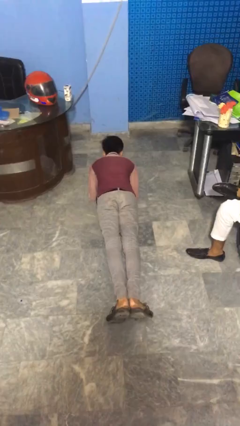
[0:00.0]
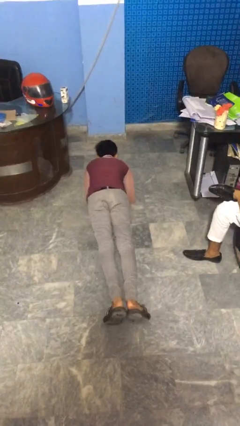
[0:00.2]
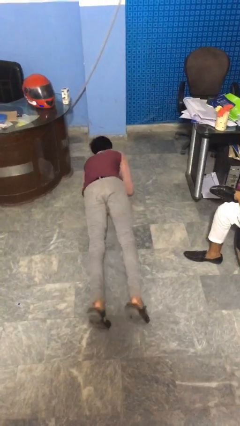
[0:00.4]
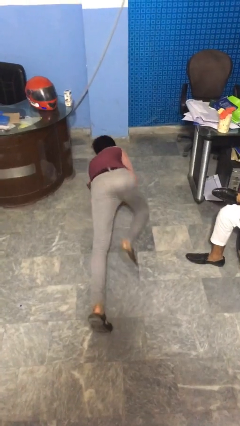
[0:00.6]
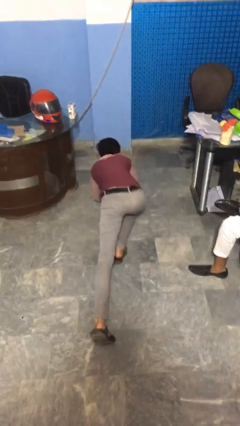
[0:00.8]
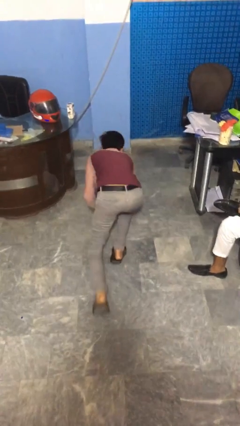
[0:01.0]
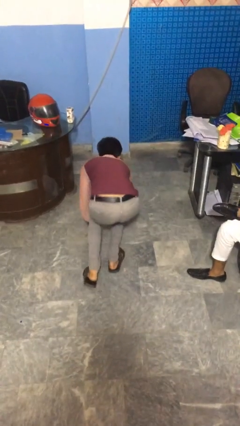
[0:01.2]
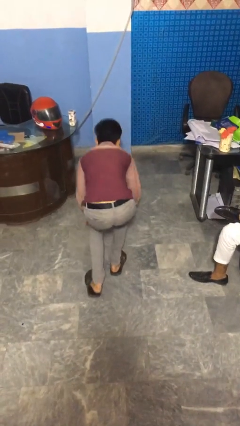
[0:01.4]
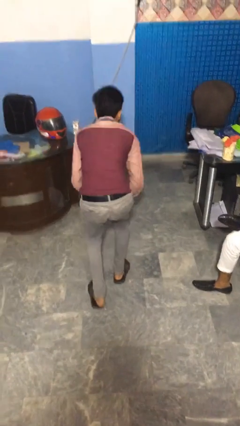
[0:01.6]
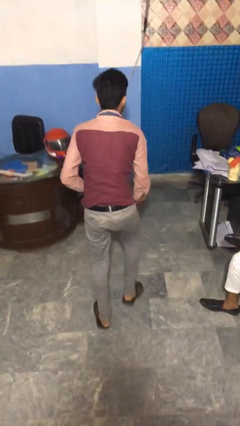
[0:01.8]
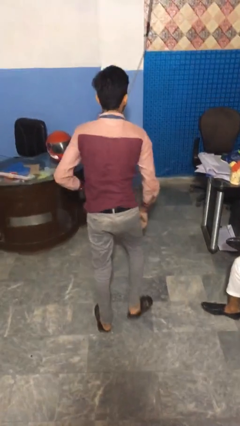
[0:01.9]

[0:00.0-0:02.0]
person stands up from floor

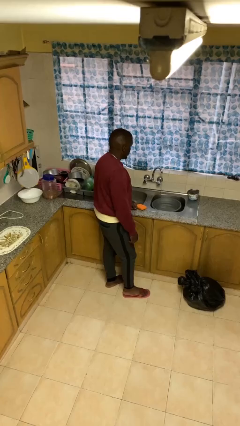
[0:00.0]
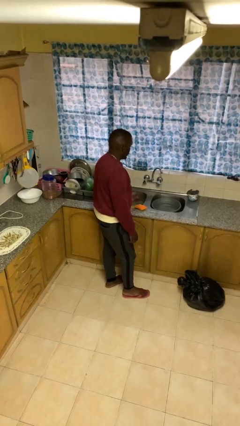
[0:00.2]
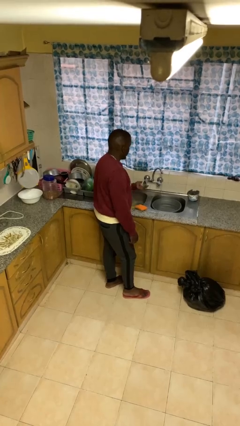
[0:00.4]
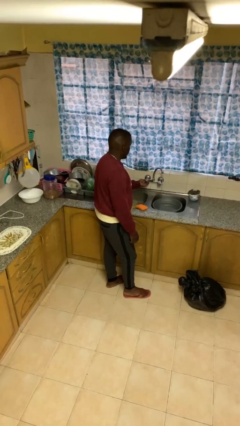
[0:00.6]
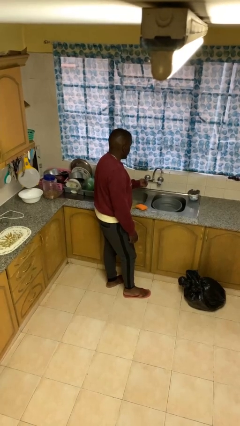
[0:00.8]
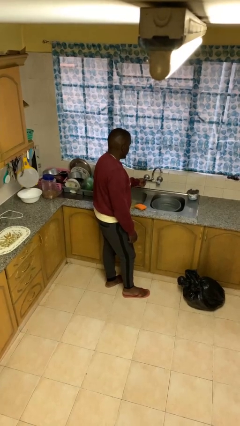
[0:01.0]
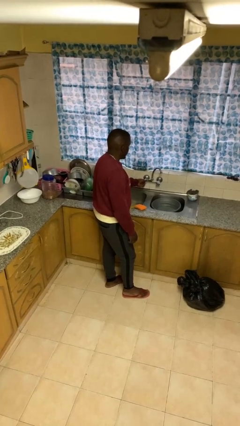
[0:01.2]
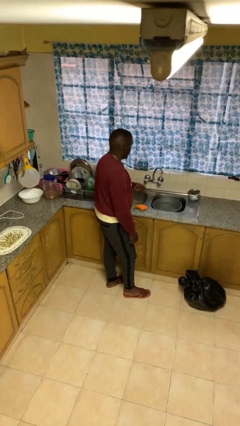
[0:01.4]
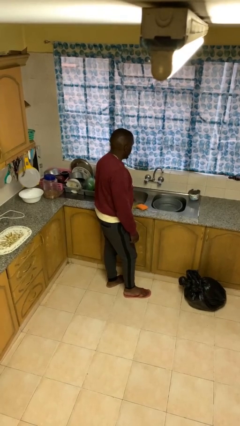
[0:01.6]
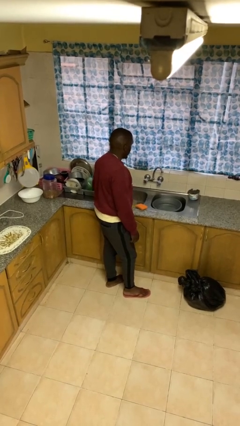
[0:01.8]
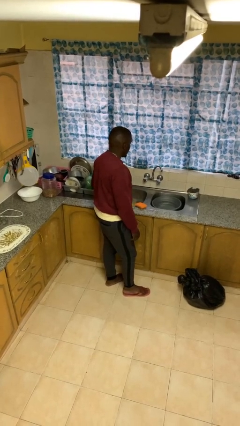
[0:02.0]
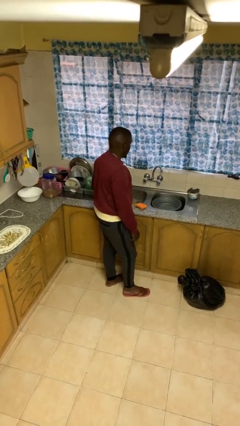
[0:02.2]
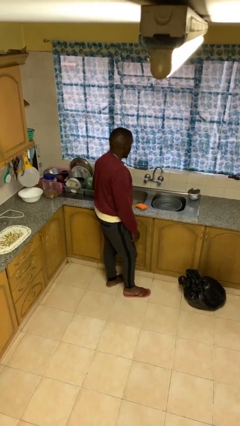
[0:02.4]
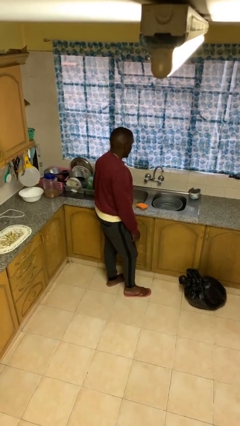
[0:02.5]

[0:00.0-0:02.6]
person turns off faucet

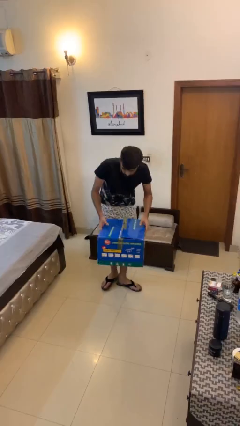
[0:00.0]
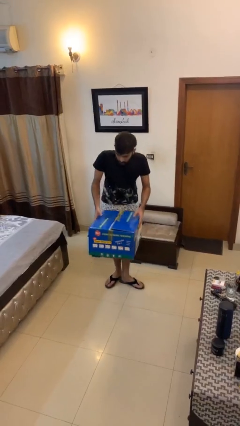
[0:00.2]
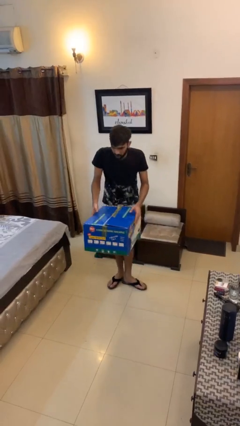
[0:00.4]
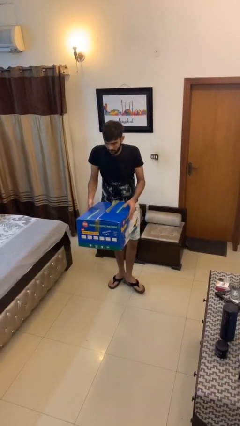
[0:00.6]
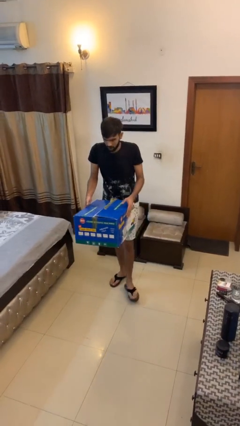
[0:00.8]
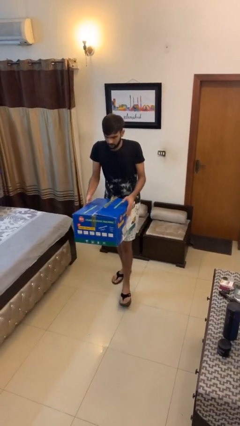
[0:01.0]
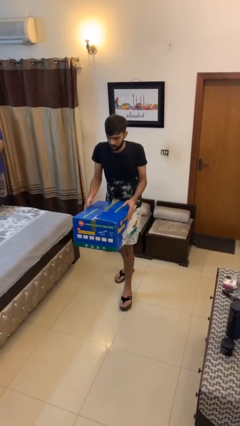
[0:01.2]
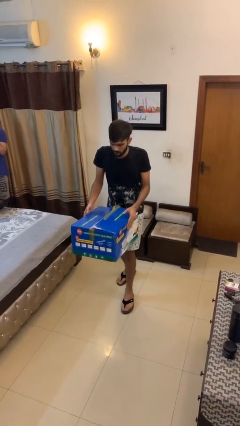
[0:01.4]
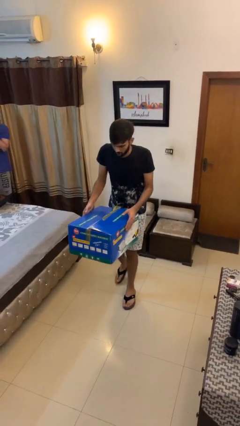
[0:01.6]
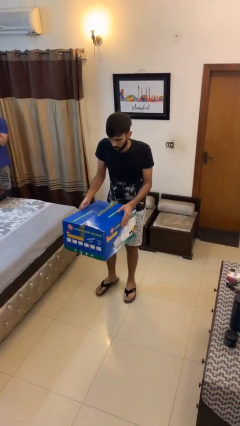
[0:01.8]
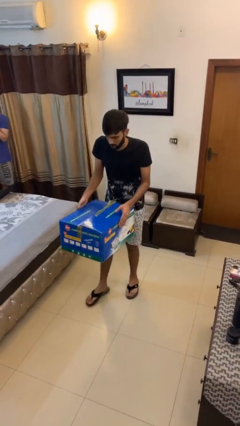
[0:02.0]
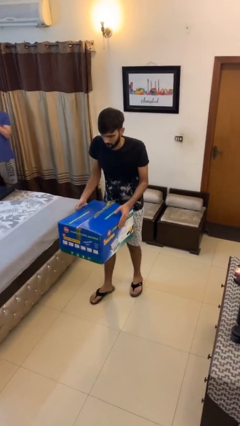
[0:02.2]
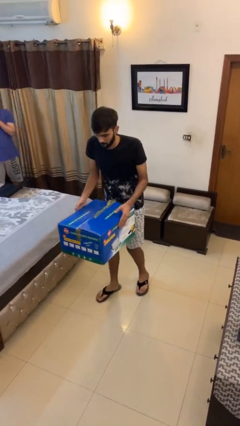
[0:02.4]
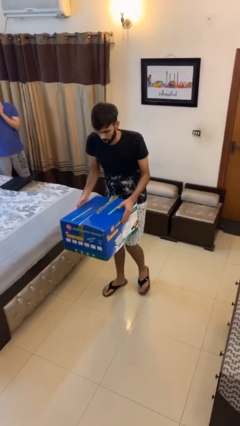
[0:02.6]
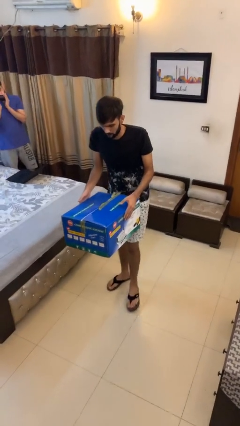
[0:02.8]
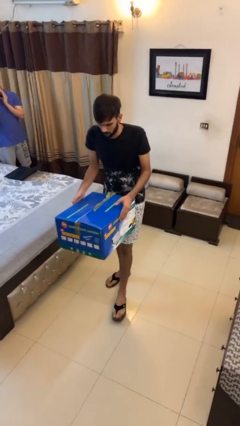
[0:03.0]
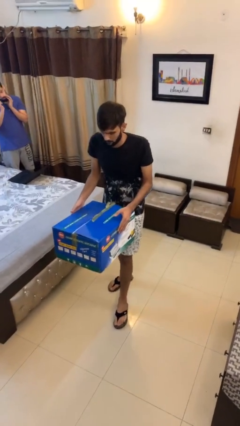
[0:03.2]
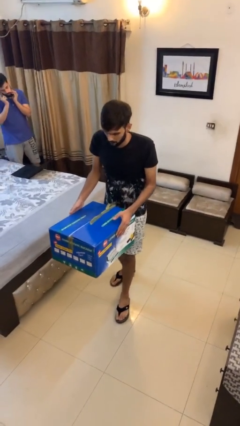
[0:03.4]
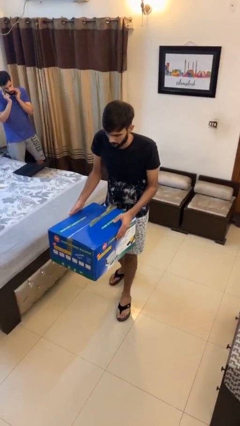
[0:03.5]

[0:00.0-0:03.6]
person carries heavy object

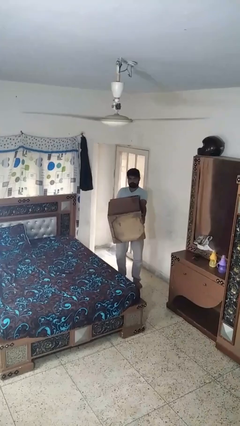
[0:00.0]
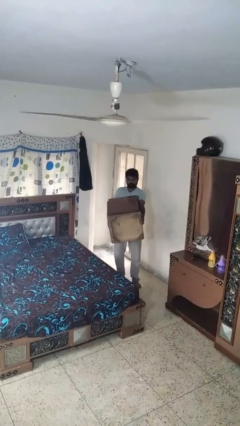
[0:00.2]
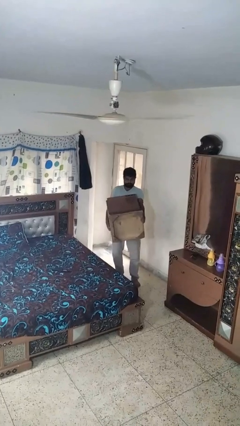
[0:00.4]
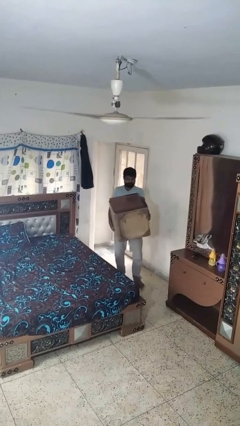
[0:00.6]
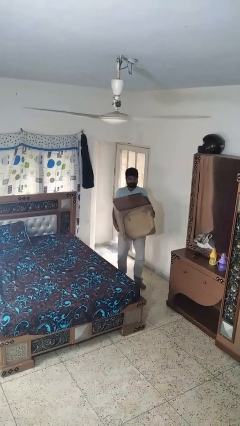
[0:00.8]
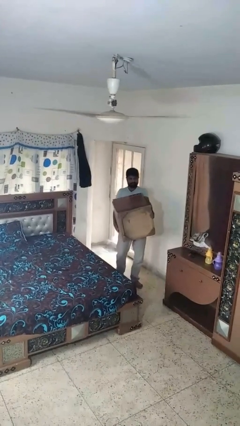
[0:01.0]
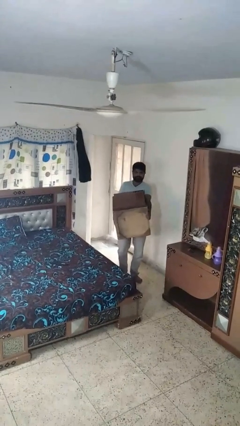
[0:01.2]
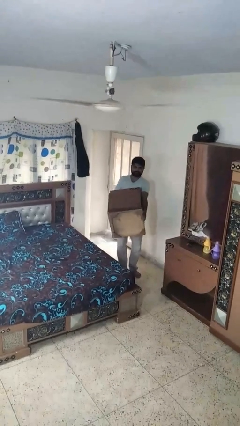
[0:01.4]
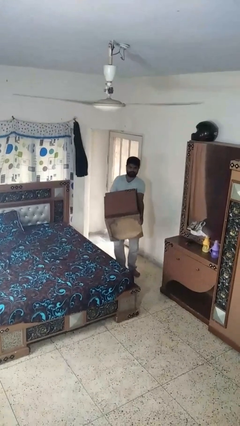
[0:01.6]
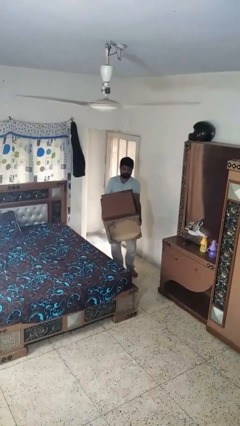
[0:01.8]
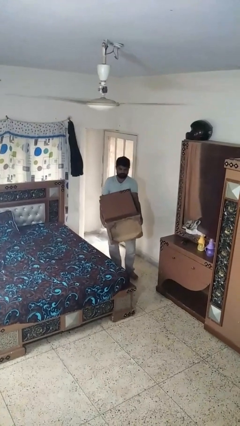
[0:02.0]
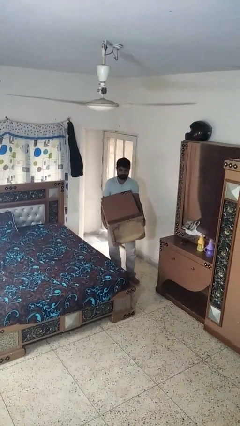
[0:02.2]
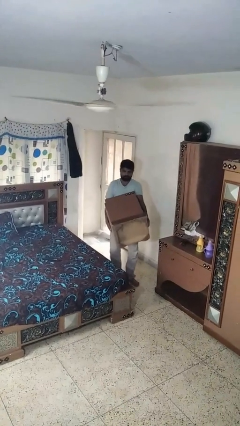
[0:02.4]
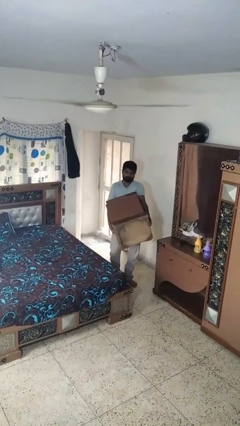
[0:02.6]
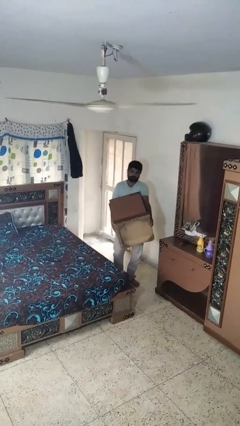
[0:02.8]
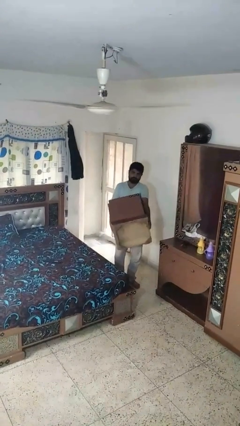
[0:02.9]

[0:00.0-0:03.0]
person carries furniture

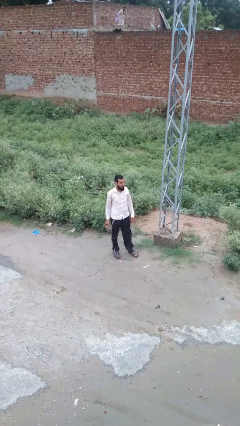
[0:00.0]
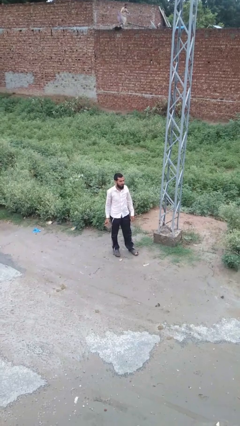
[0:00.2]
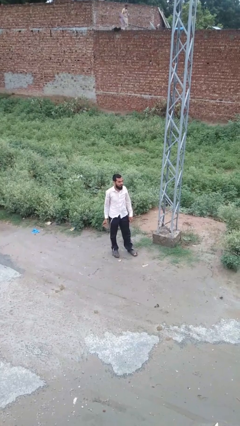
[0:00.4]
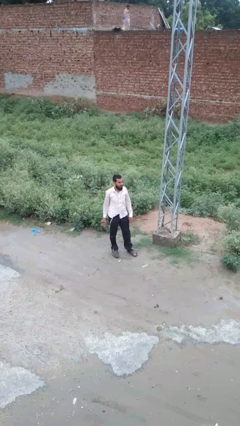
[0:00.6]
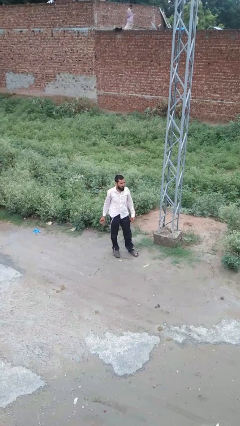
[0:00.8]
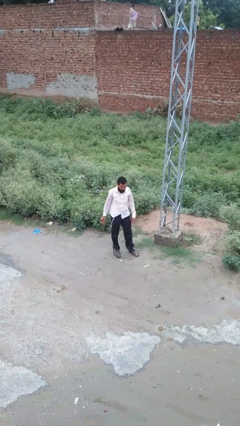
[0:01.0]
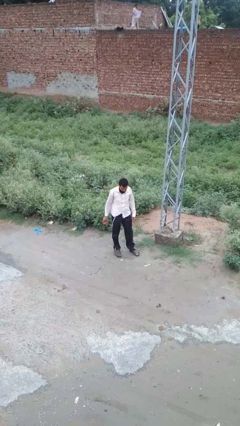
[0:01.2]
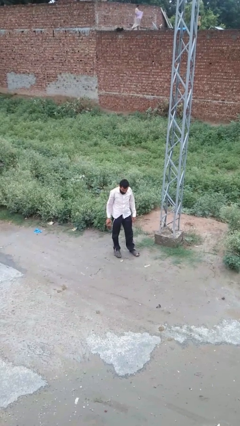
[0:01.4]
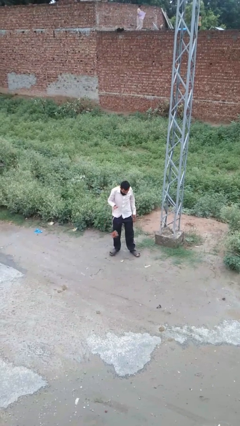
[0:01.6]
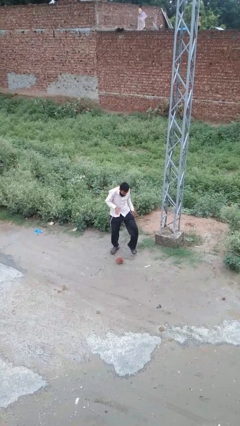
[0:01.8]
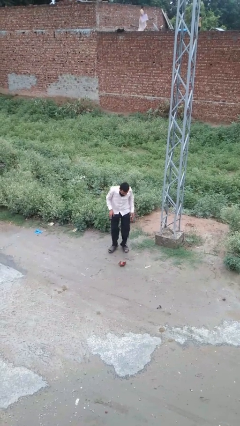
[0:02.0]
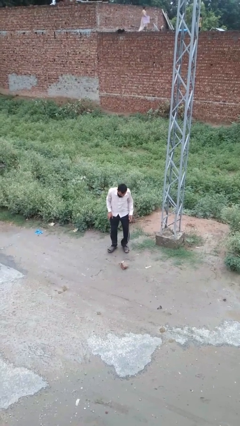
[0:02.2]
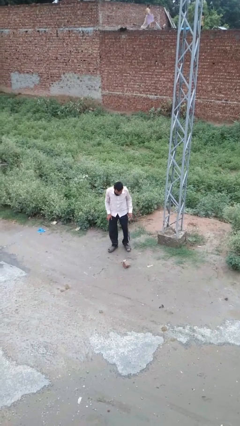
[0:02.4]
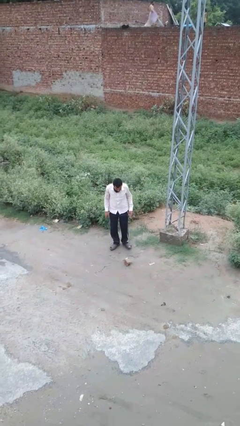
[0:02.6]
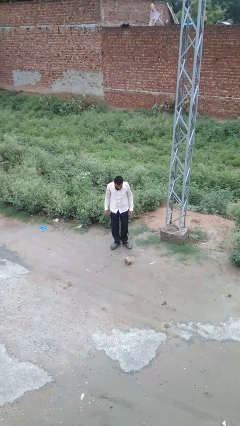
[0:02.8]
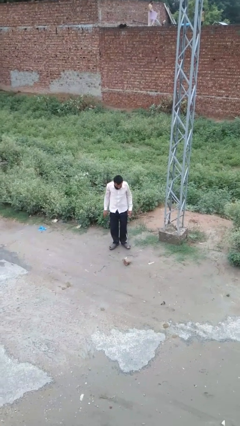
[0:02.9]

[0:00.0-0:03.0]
person drops object

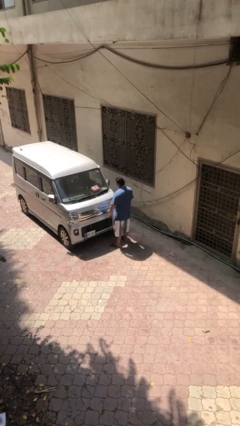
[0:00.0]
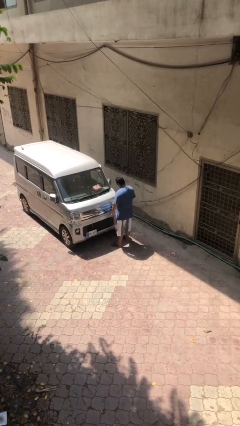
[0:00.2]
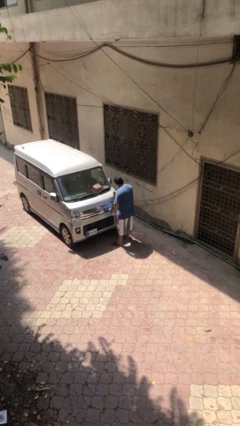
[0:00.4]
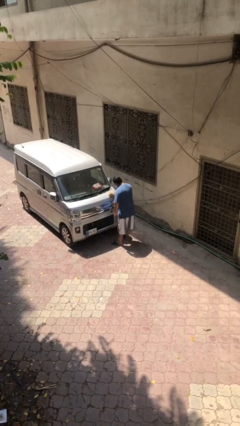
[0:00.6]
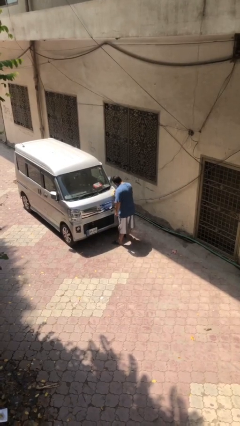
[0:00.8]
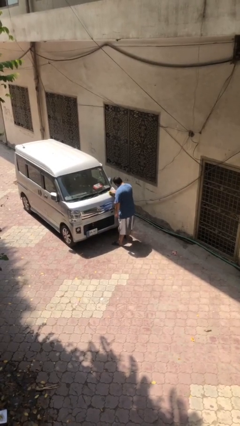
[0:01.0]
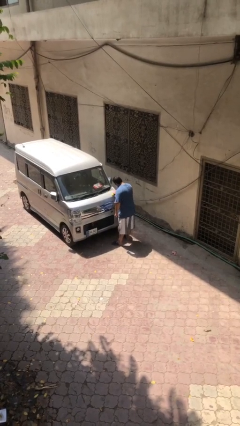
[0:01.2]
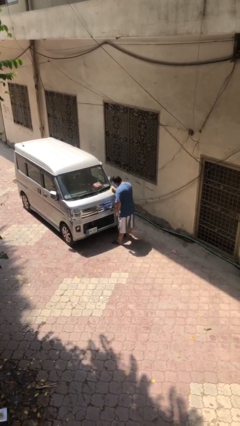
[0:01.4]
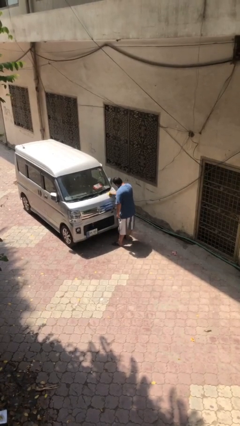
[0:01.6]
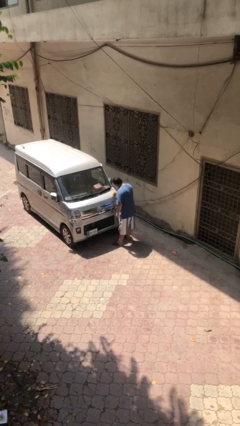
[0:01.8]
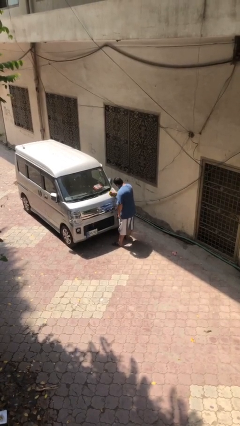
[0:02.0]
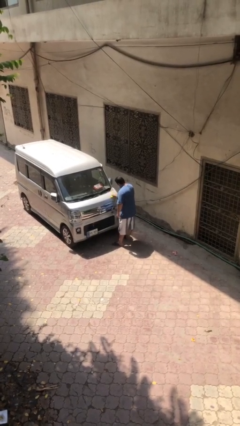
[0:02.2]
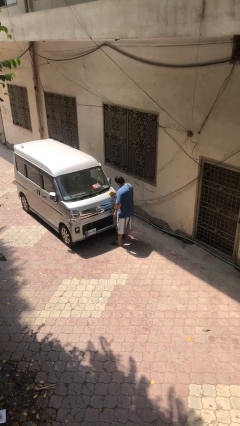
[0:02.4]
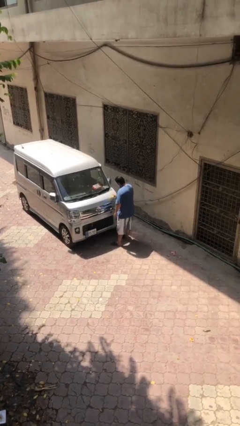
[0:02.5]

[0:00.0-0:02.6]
person polishes car with rag

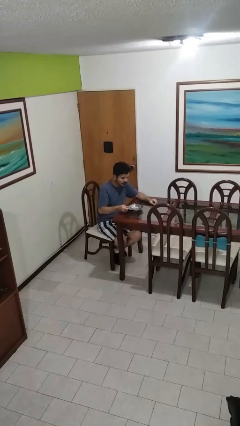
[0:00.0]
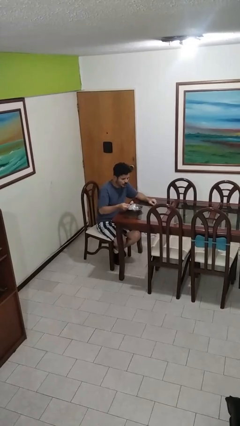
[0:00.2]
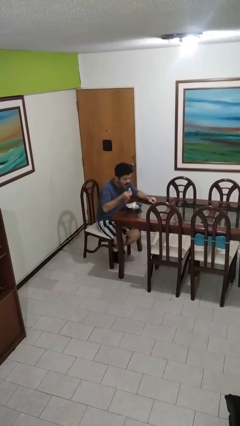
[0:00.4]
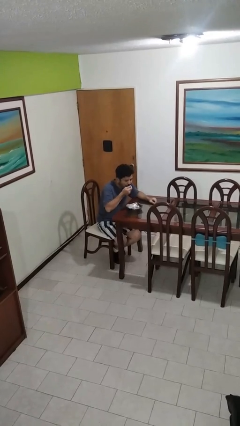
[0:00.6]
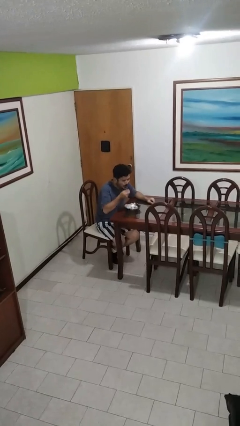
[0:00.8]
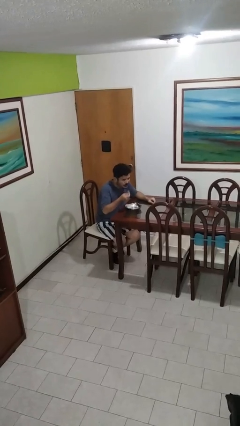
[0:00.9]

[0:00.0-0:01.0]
person eats with utensil
